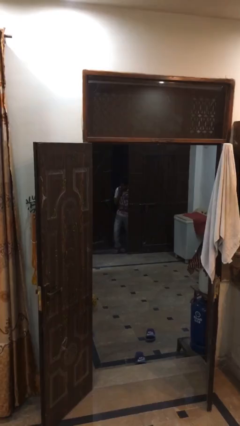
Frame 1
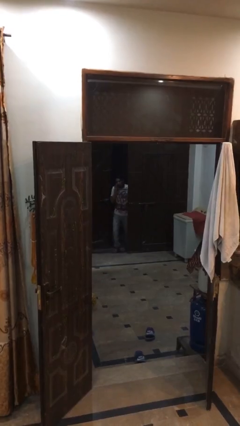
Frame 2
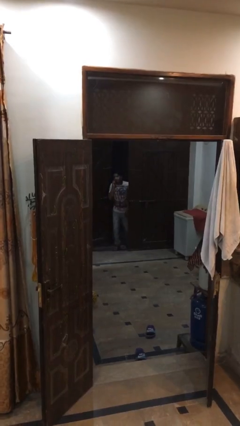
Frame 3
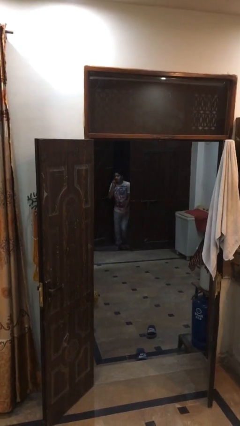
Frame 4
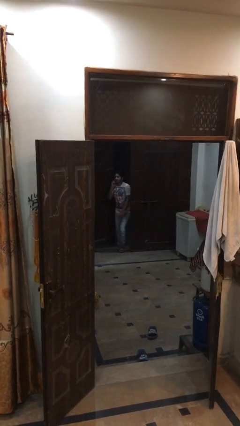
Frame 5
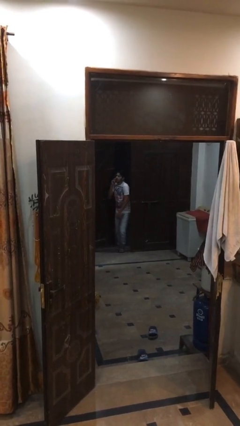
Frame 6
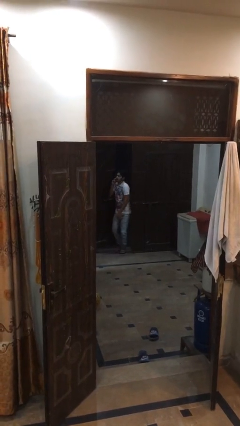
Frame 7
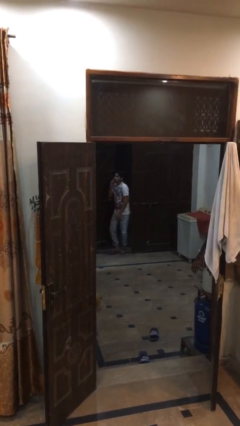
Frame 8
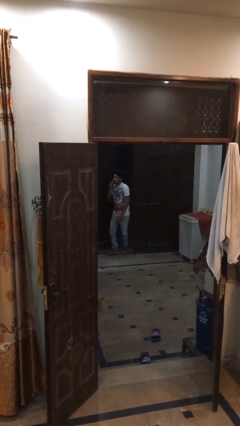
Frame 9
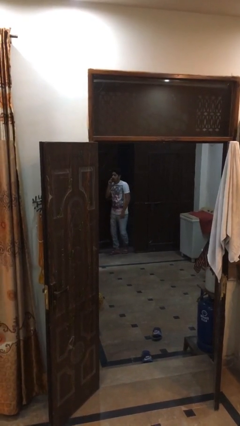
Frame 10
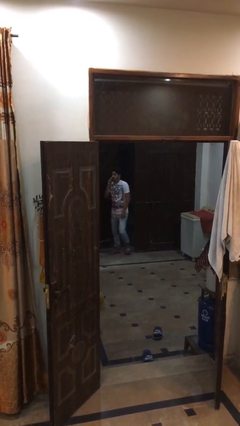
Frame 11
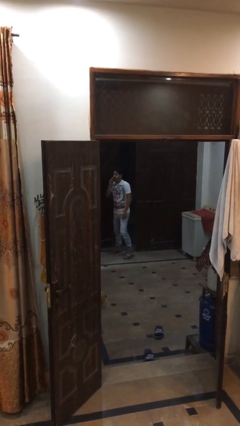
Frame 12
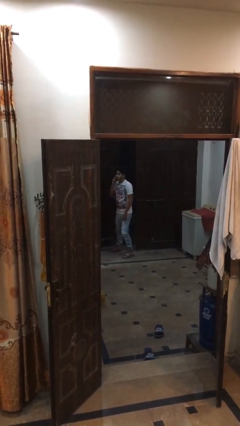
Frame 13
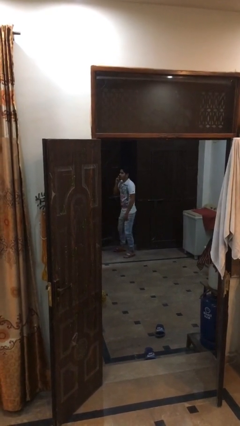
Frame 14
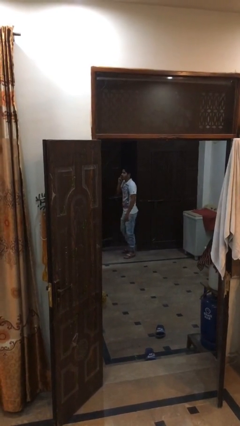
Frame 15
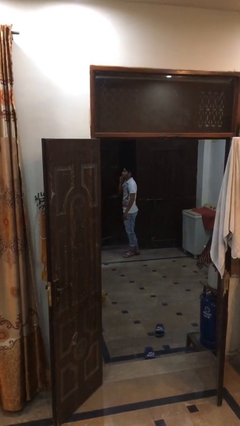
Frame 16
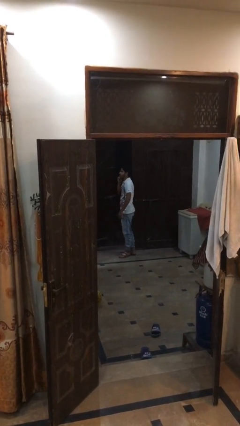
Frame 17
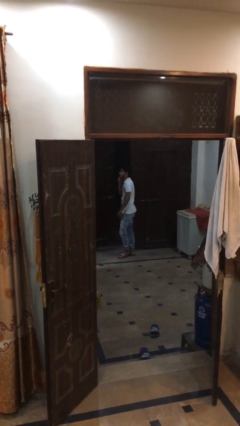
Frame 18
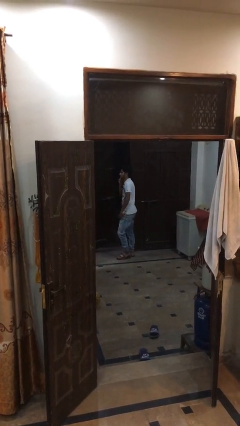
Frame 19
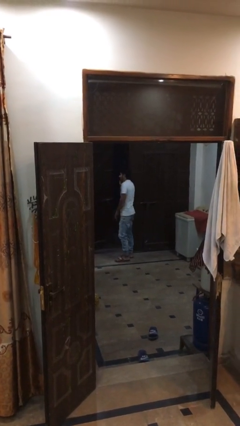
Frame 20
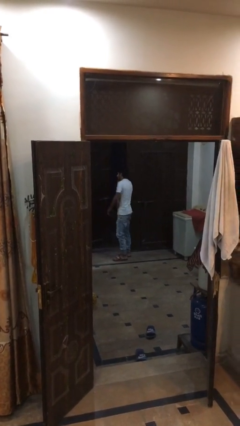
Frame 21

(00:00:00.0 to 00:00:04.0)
person enters scene through structure

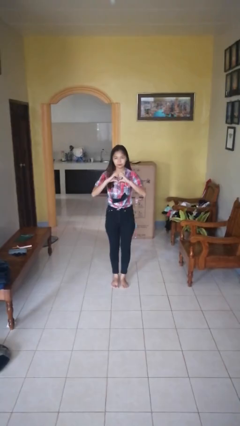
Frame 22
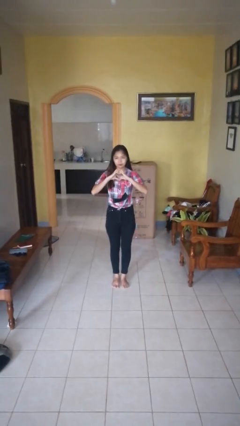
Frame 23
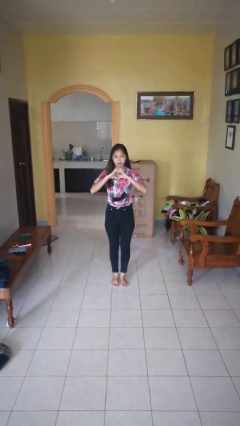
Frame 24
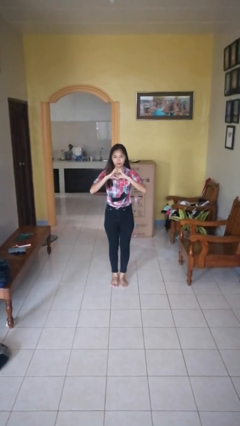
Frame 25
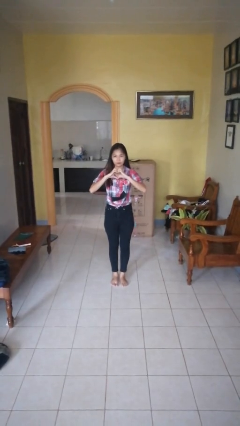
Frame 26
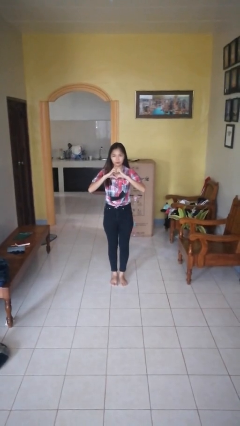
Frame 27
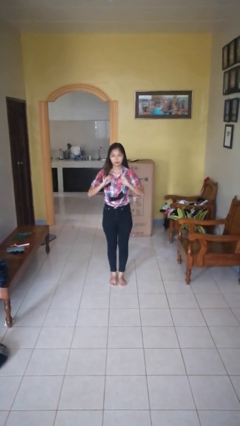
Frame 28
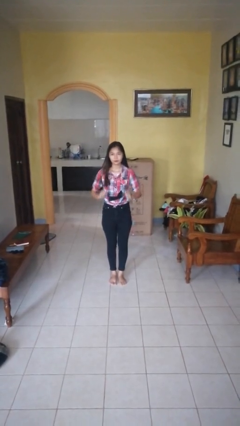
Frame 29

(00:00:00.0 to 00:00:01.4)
person gestures heart

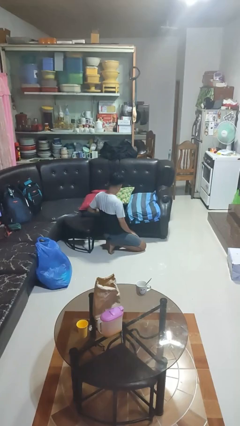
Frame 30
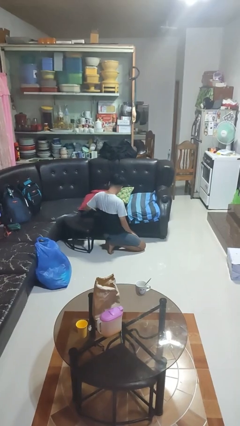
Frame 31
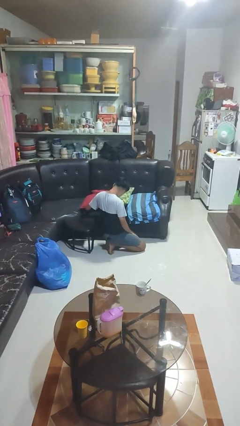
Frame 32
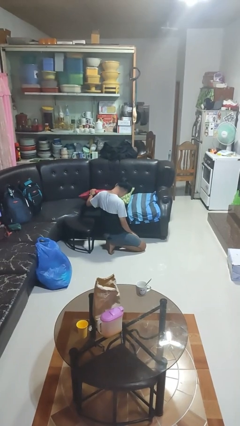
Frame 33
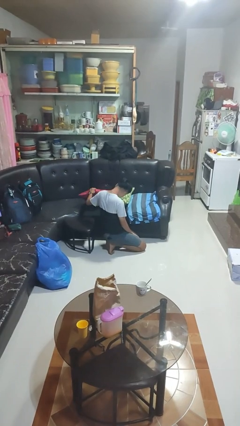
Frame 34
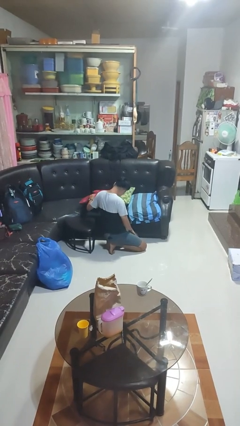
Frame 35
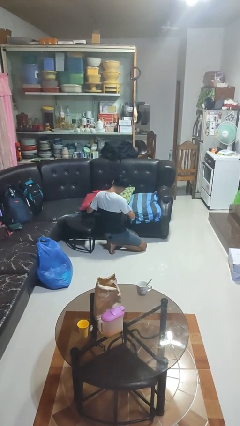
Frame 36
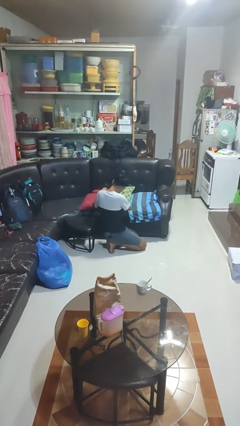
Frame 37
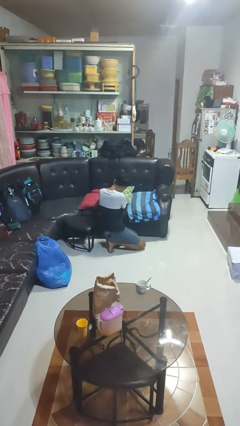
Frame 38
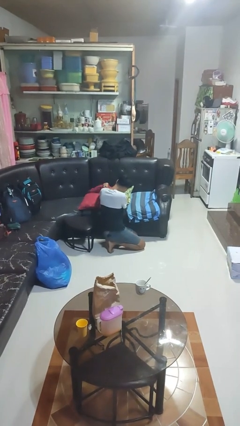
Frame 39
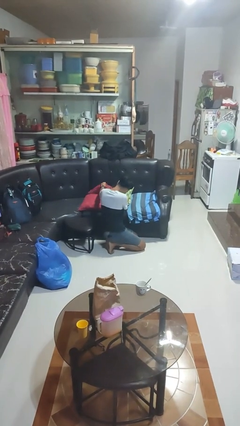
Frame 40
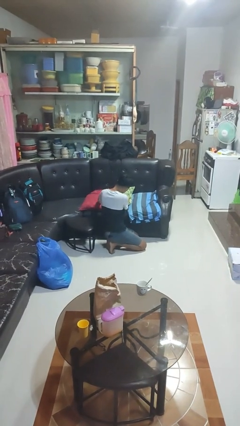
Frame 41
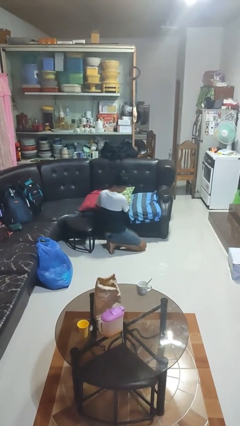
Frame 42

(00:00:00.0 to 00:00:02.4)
person searches in couch

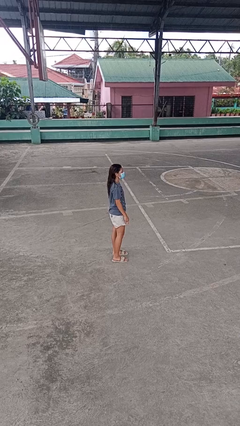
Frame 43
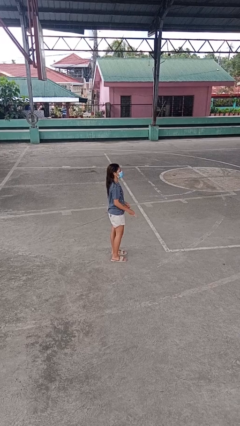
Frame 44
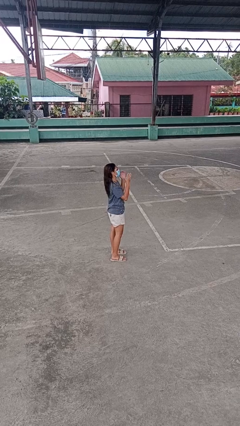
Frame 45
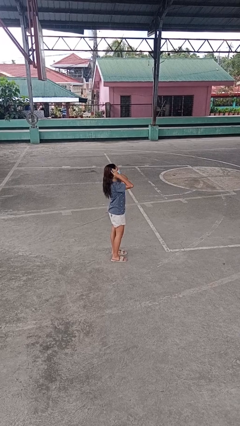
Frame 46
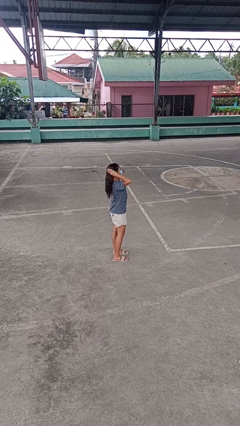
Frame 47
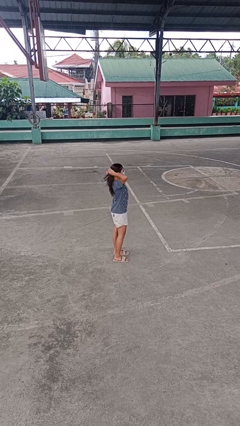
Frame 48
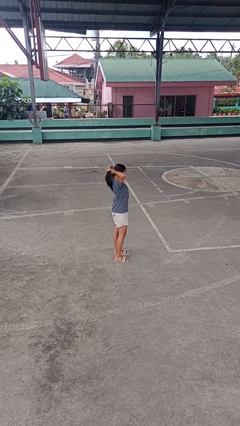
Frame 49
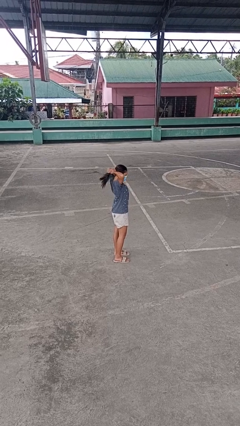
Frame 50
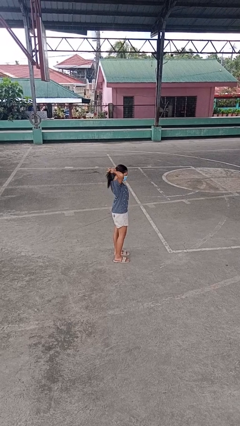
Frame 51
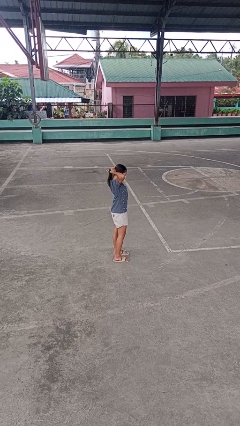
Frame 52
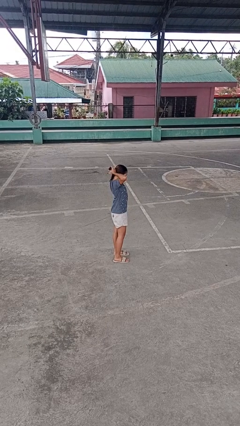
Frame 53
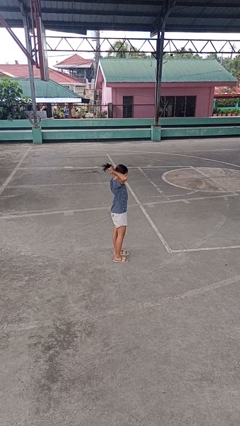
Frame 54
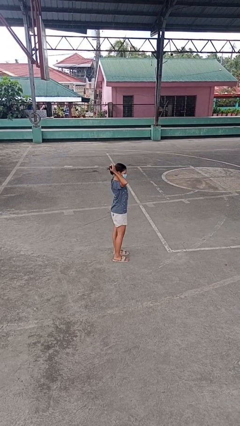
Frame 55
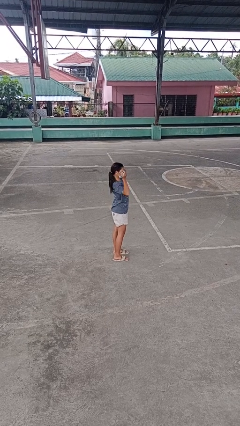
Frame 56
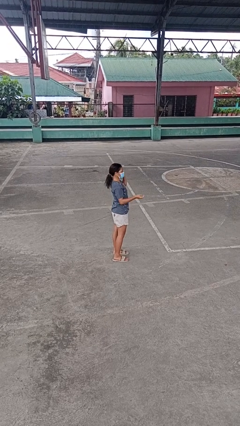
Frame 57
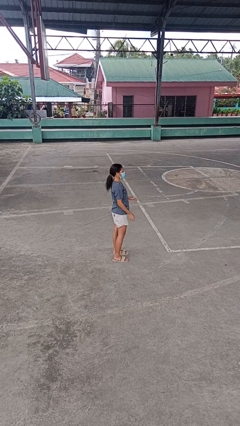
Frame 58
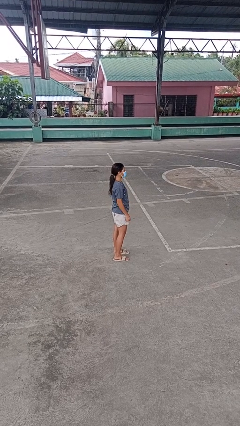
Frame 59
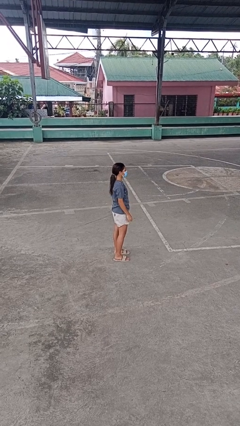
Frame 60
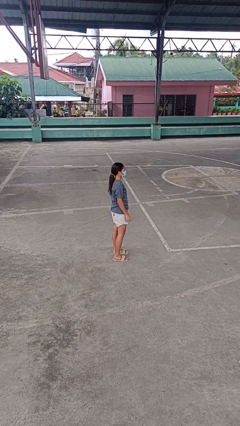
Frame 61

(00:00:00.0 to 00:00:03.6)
person puts hair in ponytail

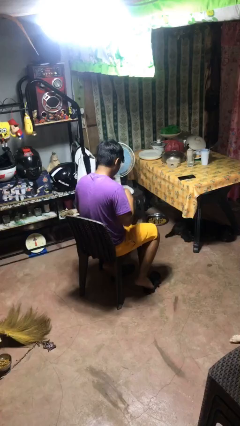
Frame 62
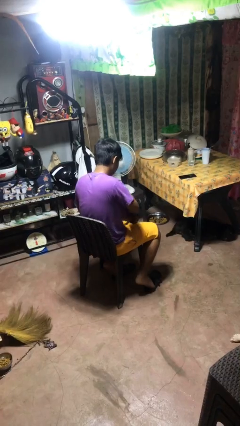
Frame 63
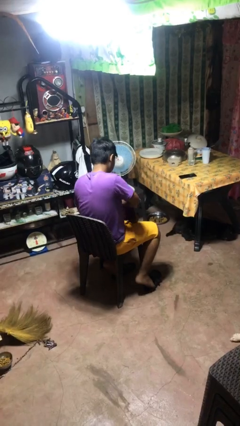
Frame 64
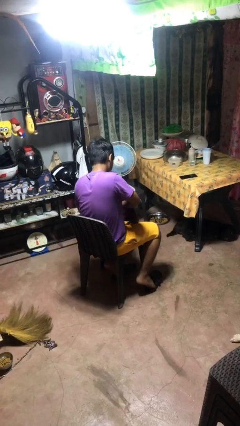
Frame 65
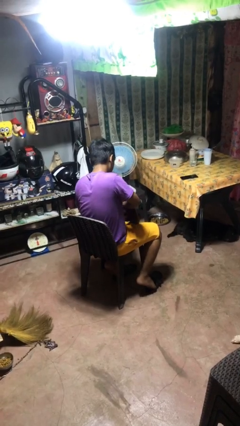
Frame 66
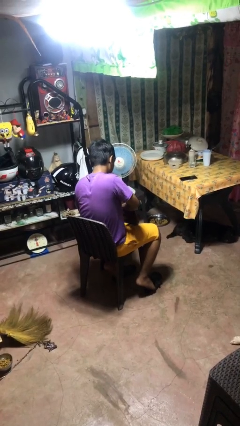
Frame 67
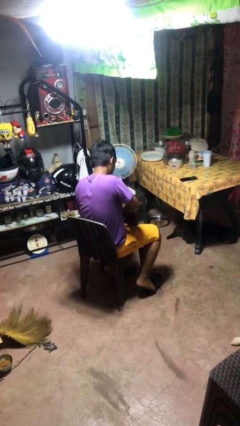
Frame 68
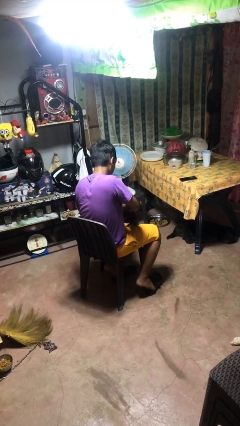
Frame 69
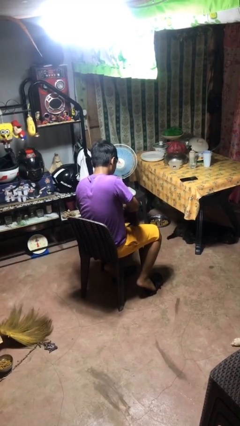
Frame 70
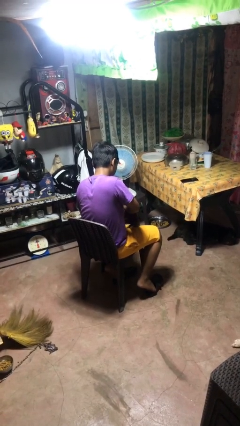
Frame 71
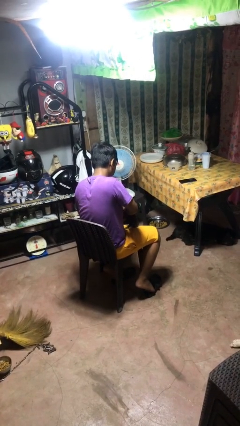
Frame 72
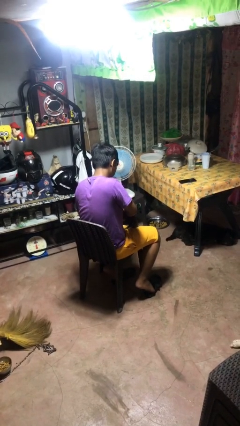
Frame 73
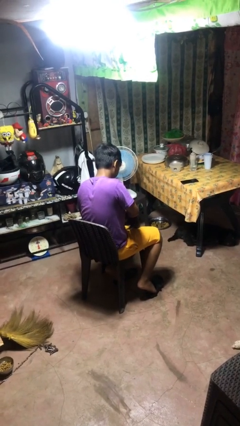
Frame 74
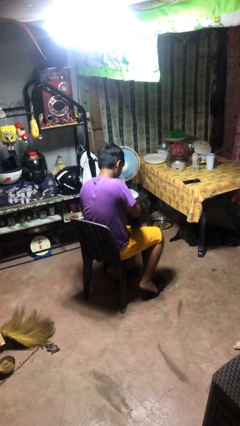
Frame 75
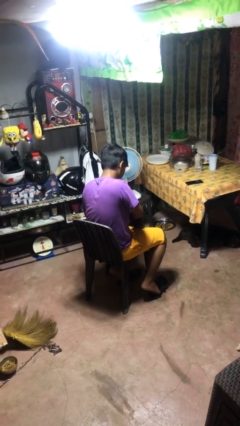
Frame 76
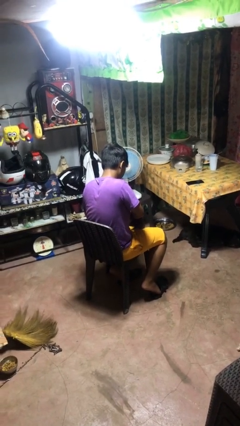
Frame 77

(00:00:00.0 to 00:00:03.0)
person searches in purse

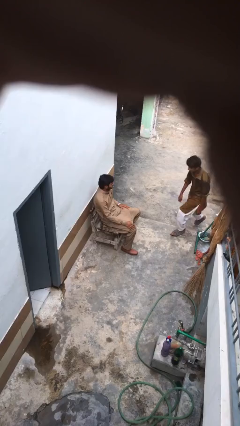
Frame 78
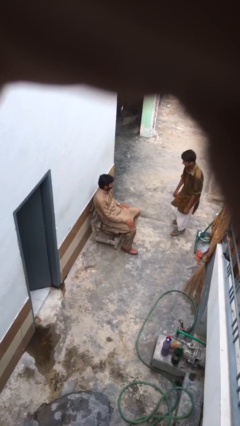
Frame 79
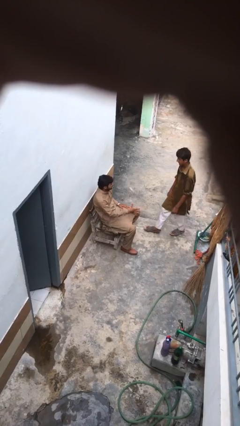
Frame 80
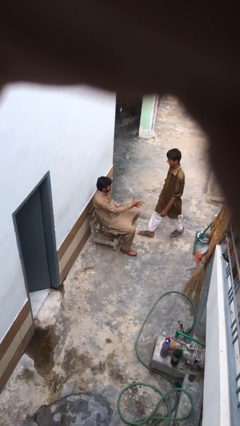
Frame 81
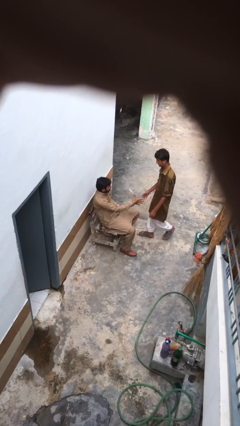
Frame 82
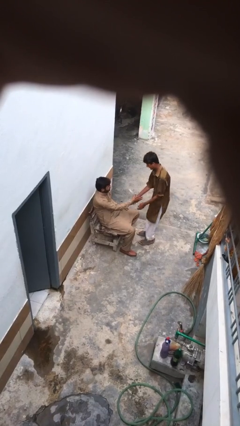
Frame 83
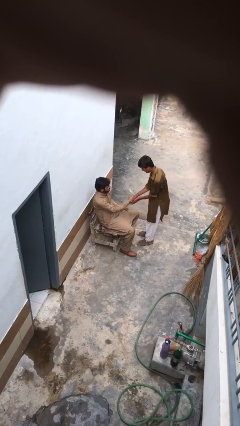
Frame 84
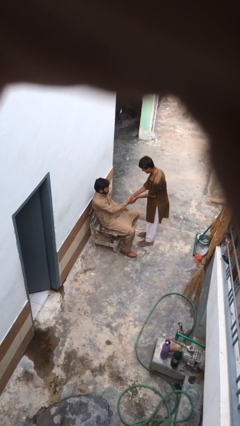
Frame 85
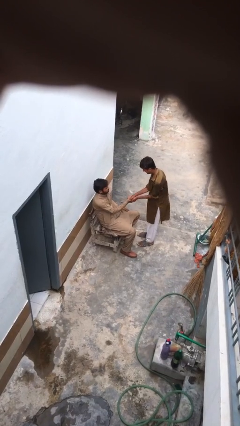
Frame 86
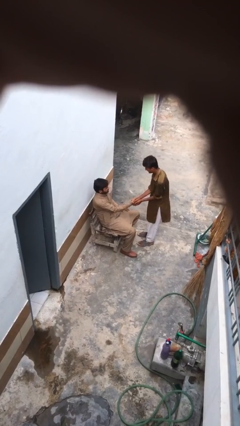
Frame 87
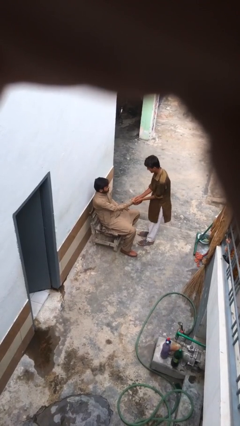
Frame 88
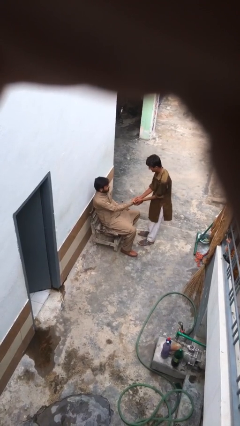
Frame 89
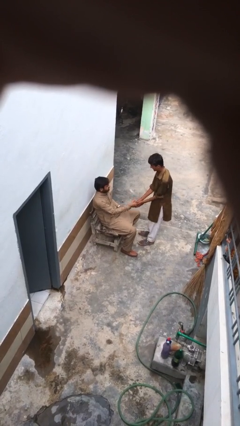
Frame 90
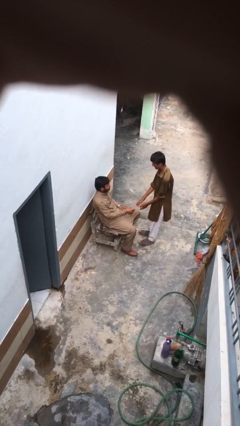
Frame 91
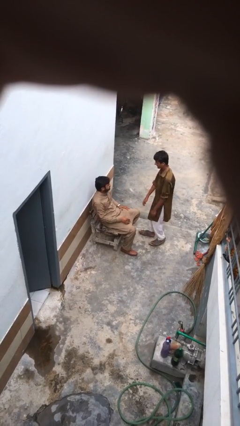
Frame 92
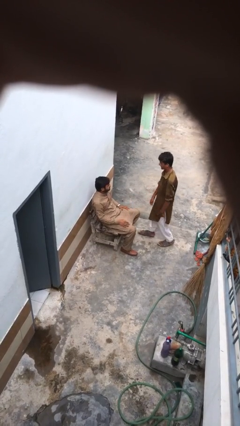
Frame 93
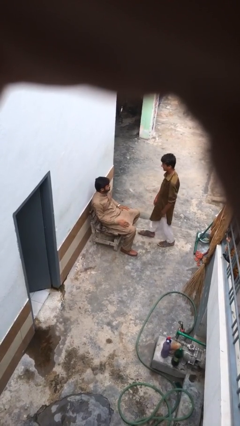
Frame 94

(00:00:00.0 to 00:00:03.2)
person shakes hand
